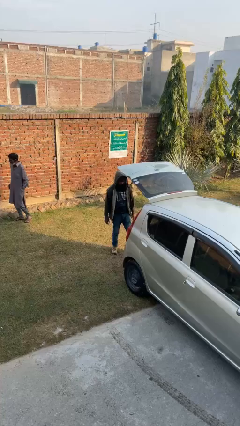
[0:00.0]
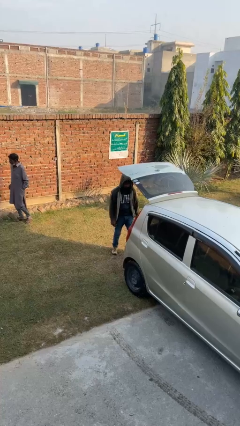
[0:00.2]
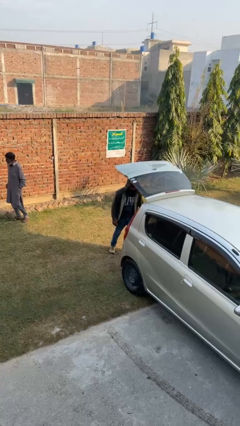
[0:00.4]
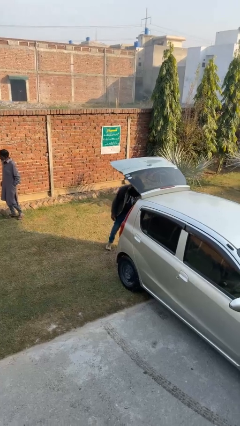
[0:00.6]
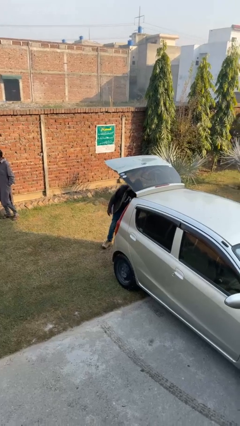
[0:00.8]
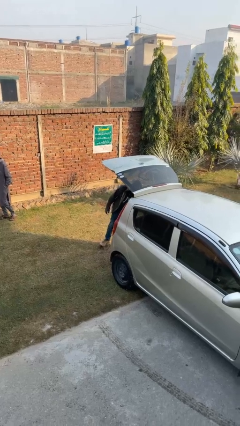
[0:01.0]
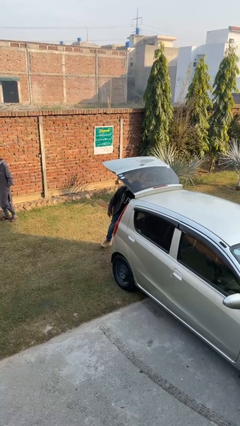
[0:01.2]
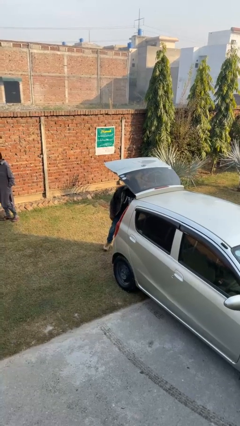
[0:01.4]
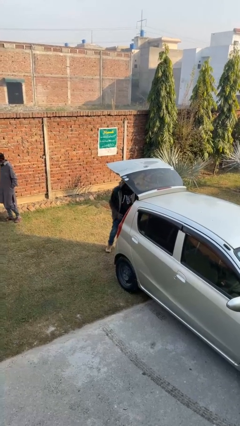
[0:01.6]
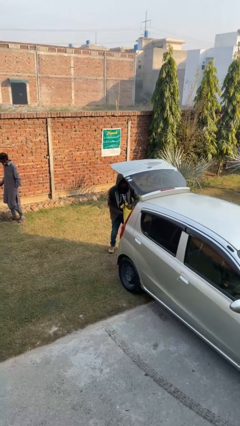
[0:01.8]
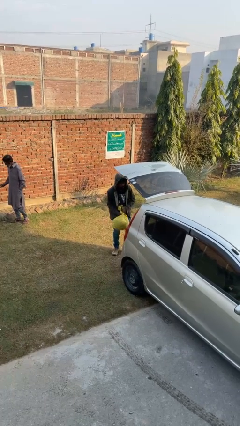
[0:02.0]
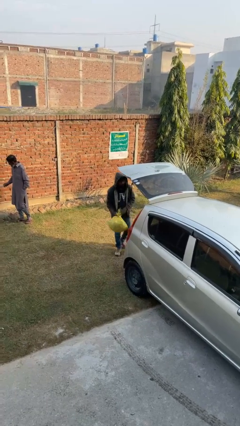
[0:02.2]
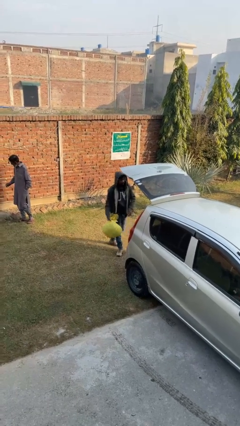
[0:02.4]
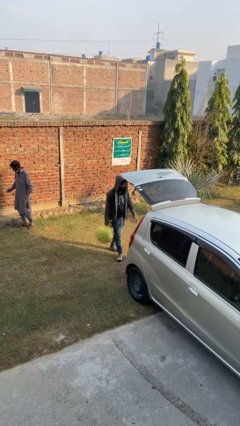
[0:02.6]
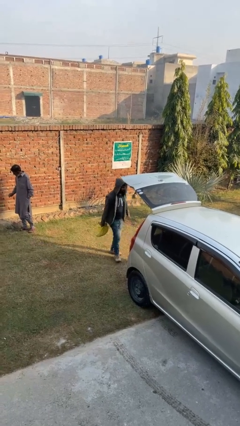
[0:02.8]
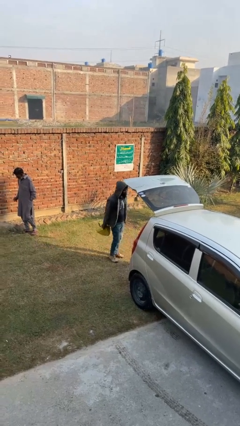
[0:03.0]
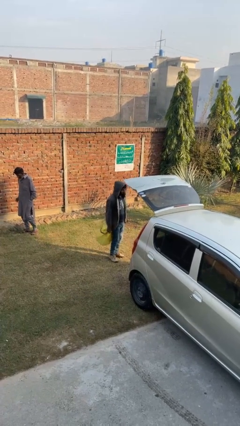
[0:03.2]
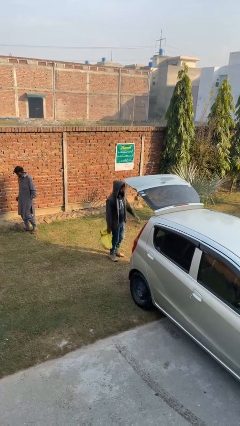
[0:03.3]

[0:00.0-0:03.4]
person unloads car

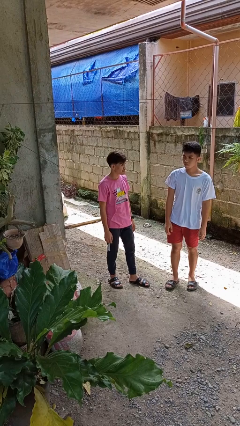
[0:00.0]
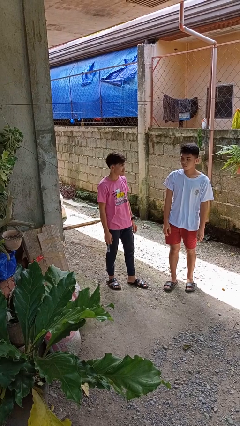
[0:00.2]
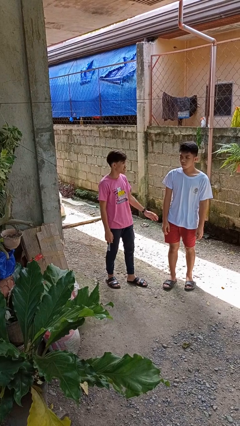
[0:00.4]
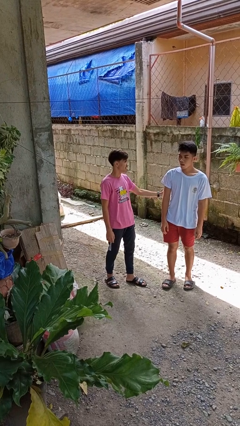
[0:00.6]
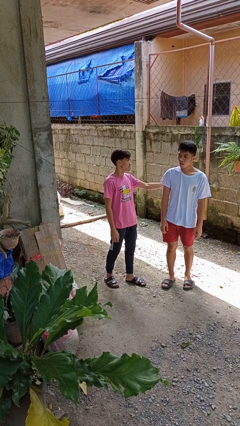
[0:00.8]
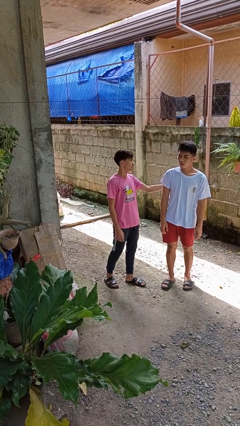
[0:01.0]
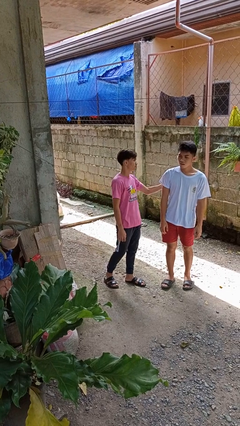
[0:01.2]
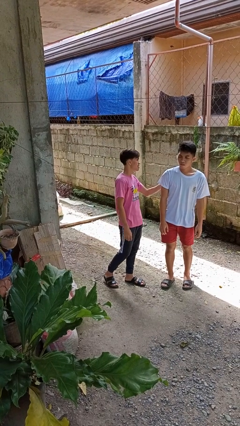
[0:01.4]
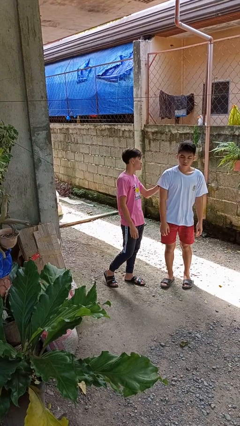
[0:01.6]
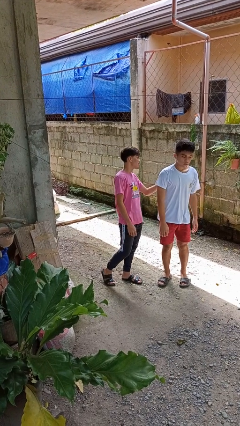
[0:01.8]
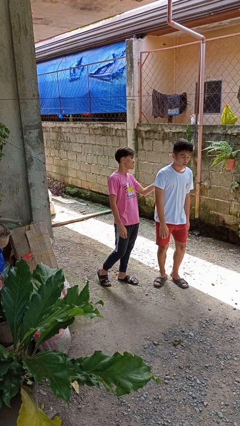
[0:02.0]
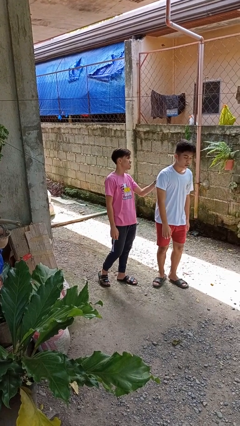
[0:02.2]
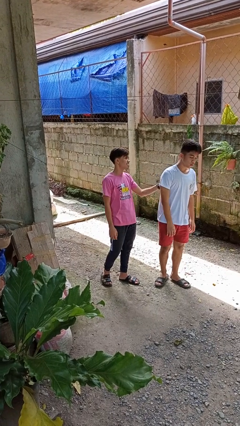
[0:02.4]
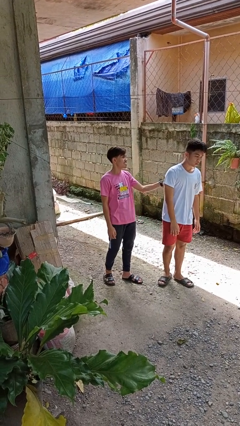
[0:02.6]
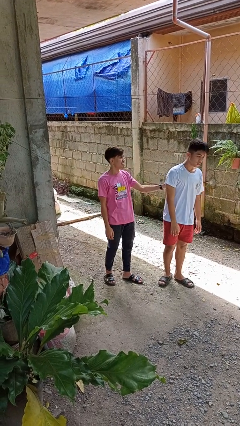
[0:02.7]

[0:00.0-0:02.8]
person touches back of person

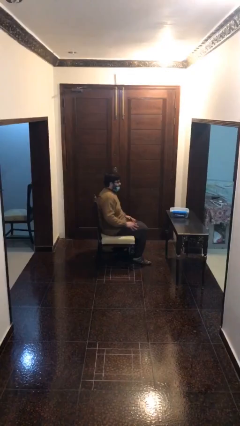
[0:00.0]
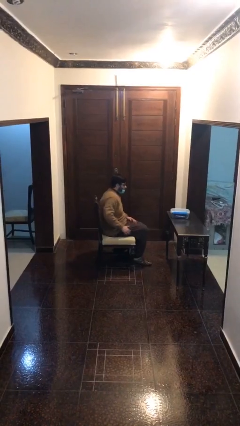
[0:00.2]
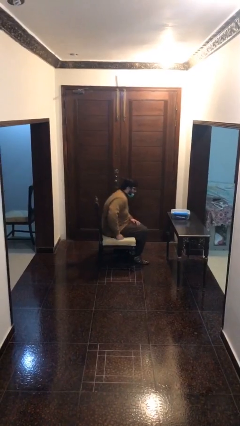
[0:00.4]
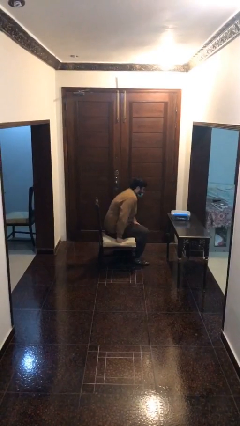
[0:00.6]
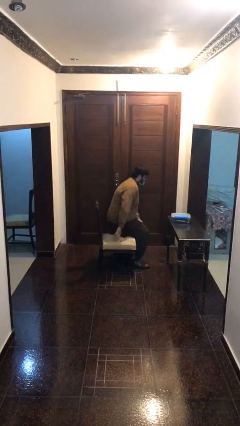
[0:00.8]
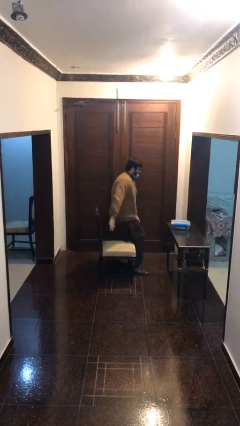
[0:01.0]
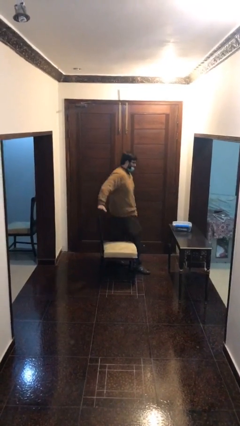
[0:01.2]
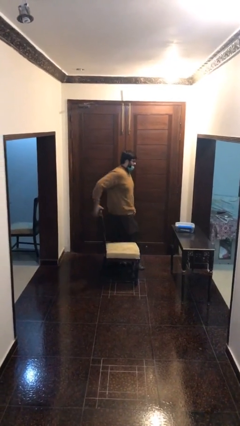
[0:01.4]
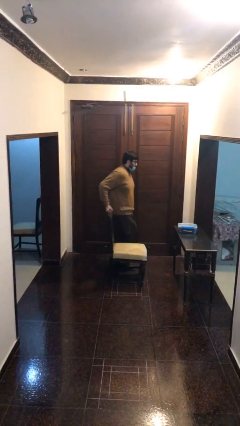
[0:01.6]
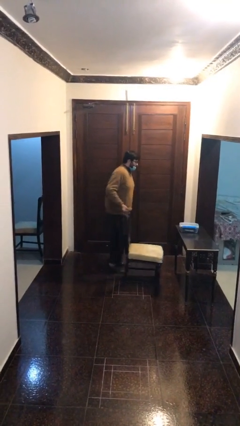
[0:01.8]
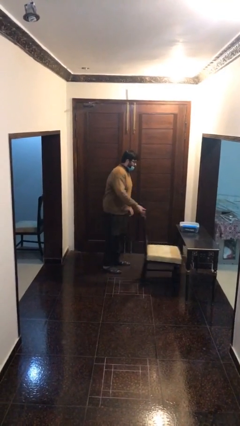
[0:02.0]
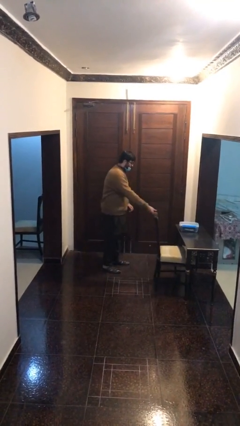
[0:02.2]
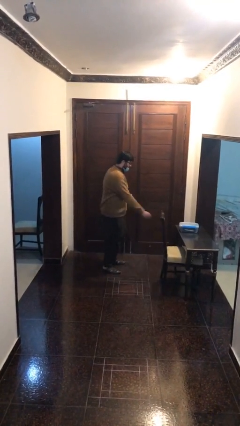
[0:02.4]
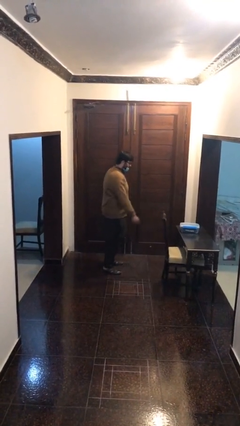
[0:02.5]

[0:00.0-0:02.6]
person stands up

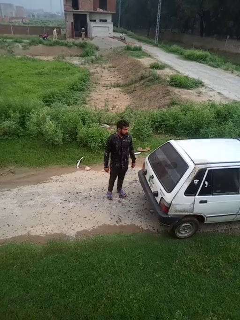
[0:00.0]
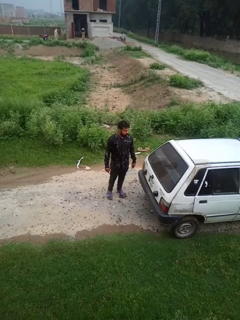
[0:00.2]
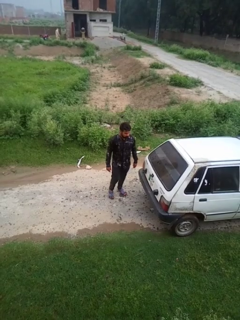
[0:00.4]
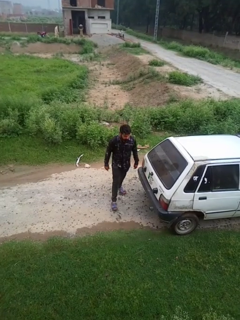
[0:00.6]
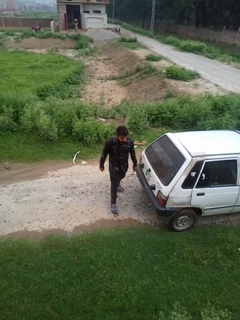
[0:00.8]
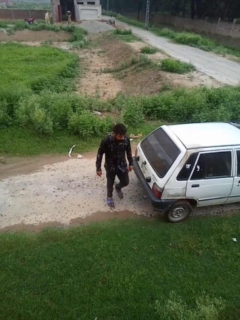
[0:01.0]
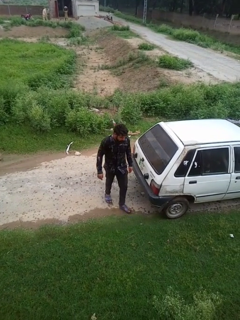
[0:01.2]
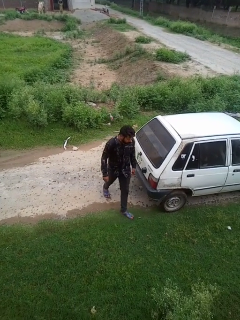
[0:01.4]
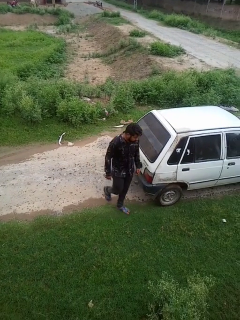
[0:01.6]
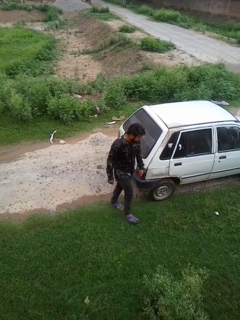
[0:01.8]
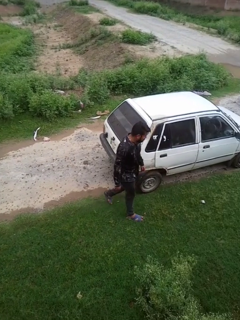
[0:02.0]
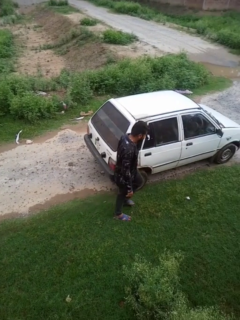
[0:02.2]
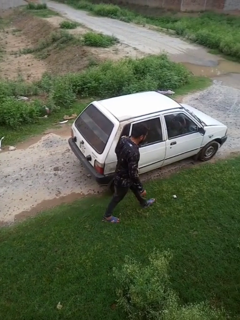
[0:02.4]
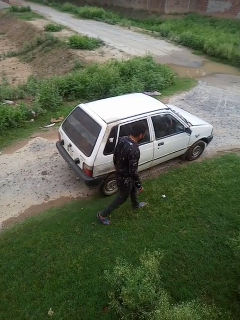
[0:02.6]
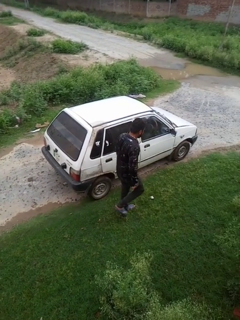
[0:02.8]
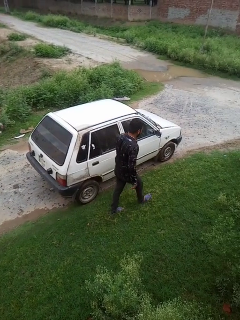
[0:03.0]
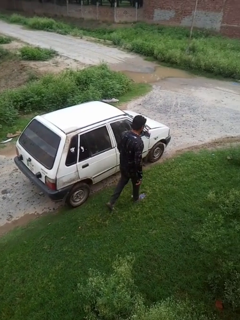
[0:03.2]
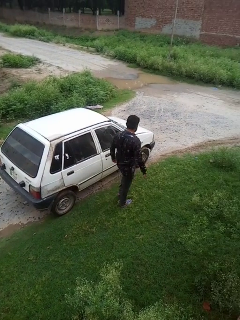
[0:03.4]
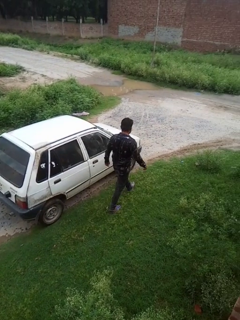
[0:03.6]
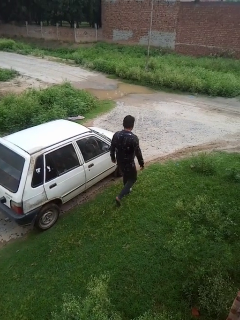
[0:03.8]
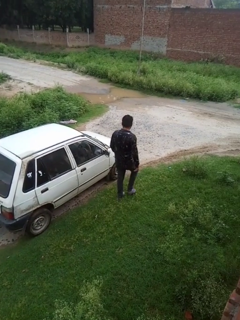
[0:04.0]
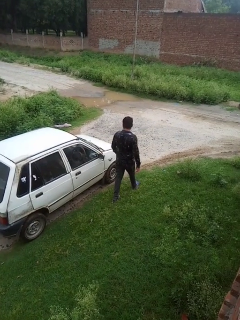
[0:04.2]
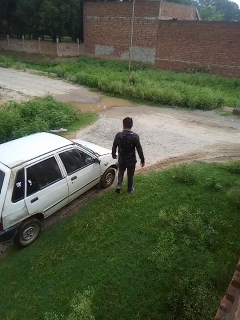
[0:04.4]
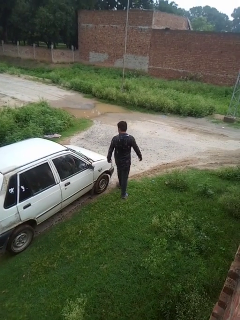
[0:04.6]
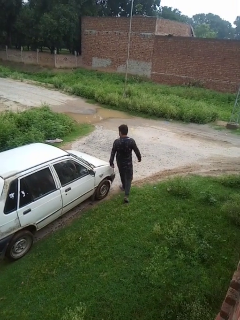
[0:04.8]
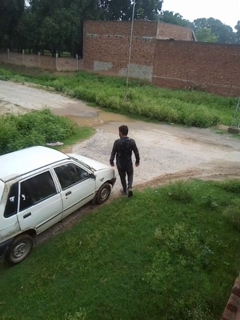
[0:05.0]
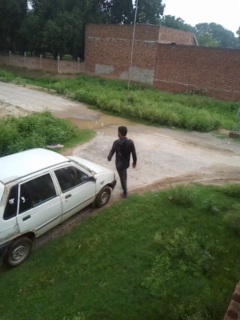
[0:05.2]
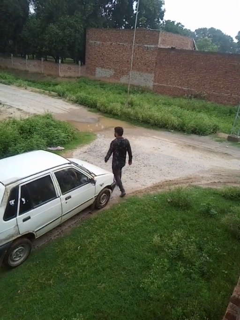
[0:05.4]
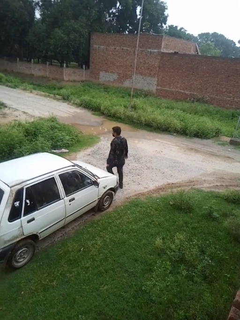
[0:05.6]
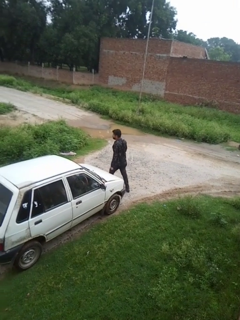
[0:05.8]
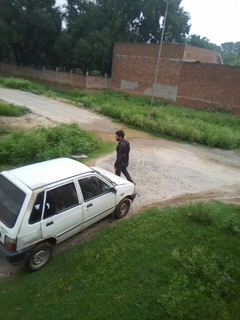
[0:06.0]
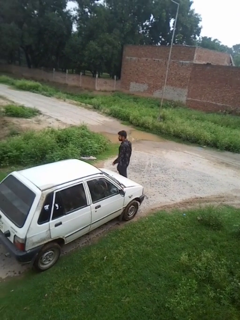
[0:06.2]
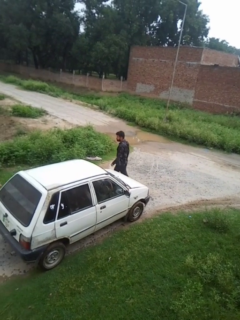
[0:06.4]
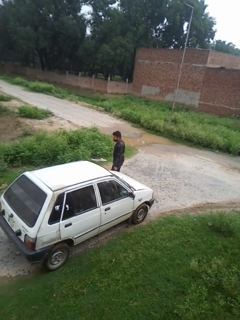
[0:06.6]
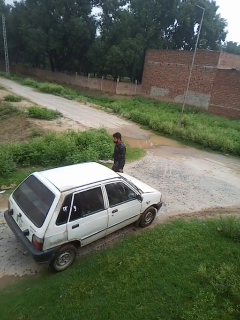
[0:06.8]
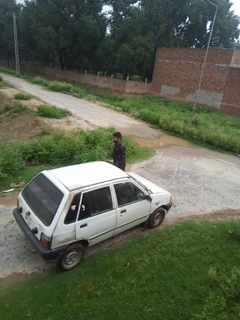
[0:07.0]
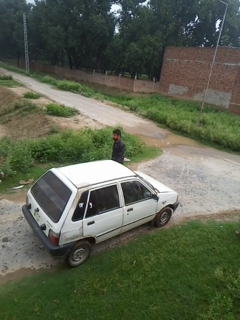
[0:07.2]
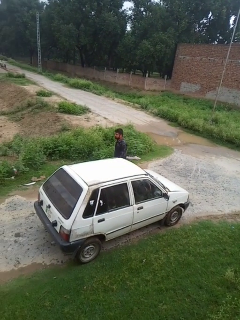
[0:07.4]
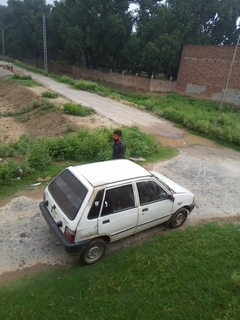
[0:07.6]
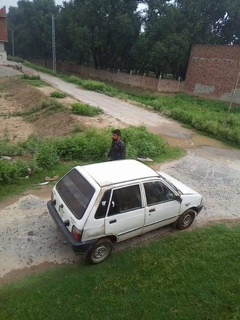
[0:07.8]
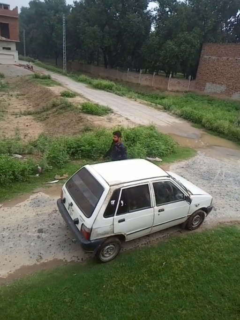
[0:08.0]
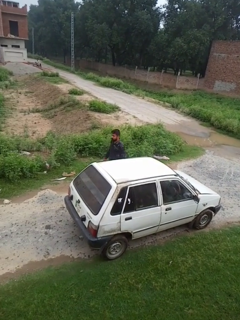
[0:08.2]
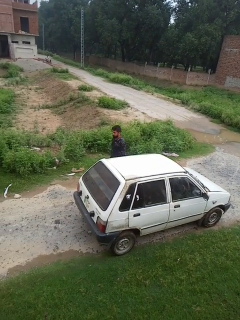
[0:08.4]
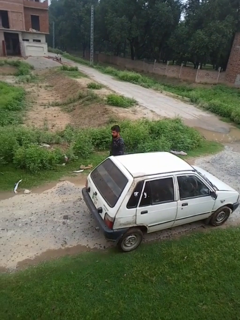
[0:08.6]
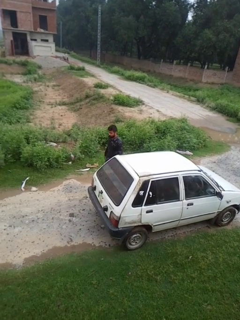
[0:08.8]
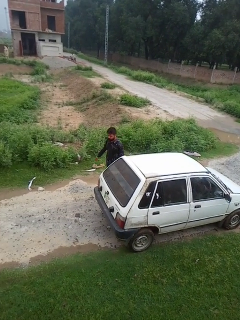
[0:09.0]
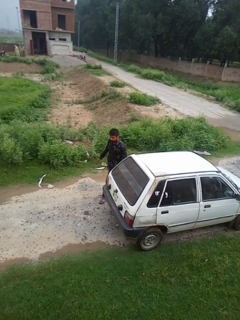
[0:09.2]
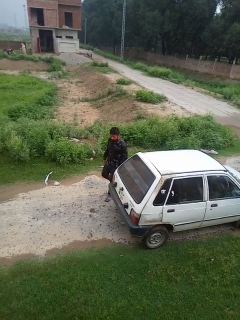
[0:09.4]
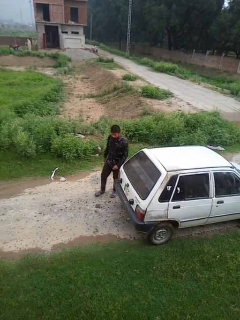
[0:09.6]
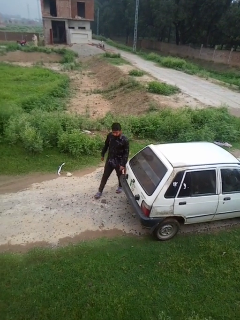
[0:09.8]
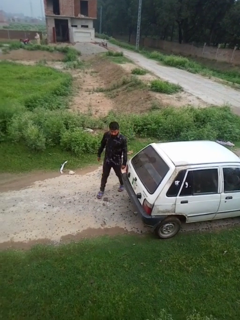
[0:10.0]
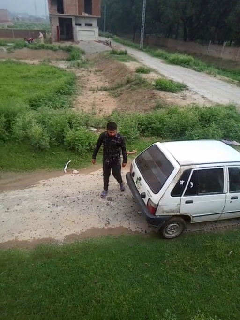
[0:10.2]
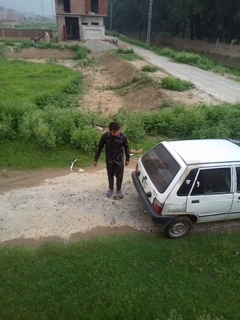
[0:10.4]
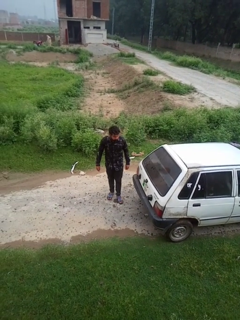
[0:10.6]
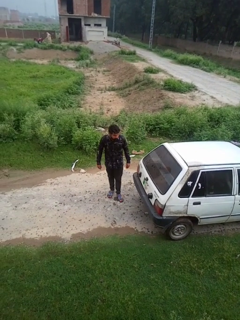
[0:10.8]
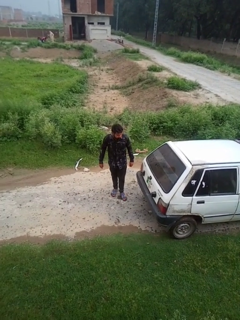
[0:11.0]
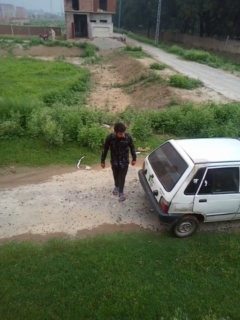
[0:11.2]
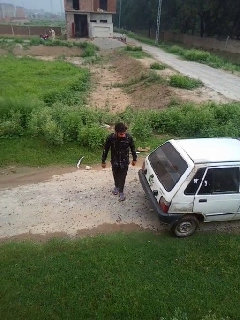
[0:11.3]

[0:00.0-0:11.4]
person walks around car

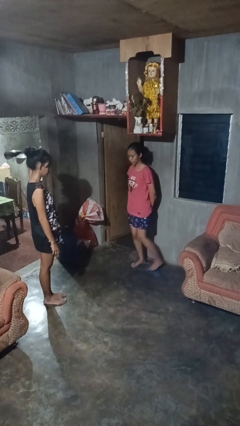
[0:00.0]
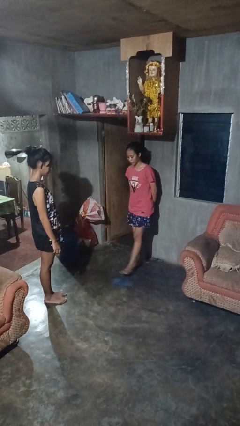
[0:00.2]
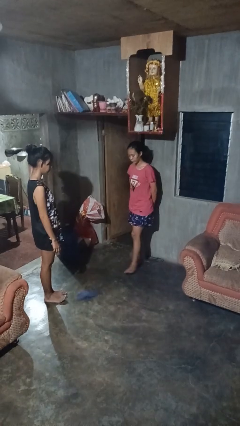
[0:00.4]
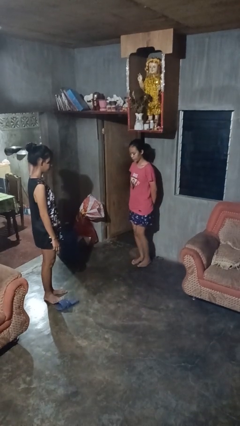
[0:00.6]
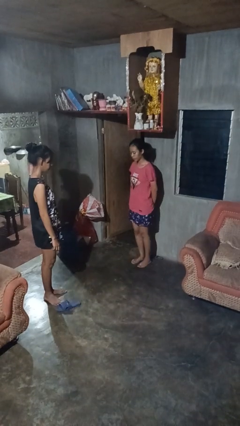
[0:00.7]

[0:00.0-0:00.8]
person kicks object to person
